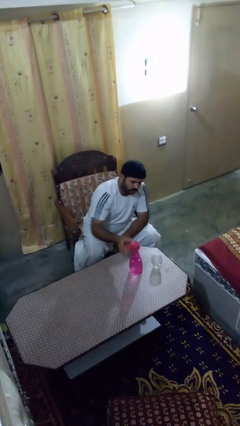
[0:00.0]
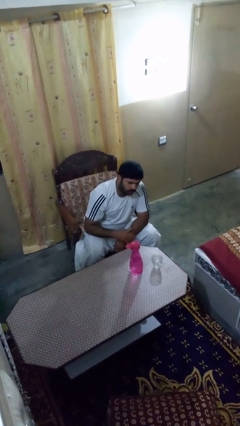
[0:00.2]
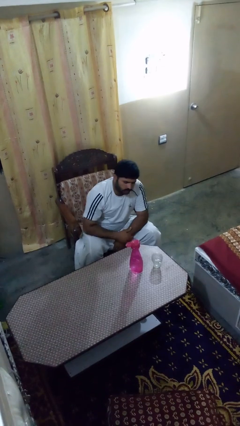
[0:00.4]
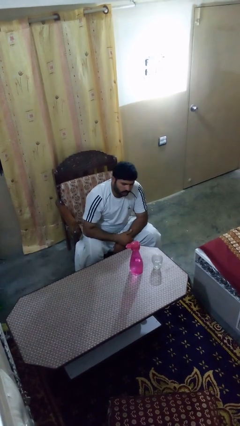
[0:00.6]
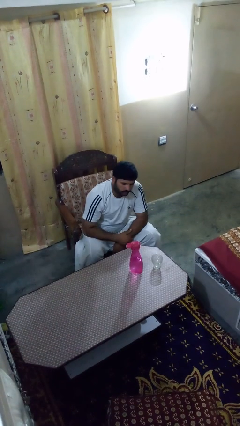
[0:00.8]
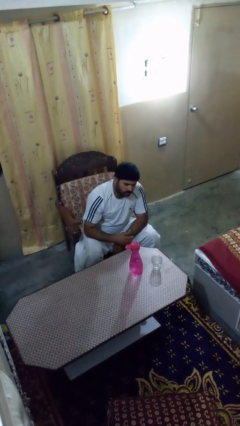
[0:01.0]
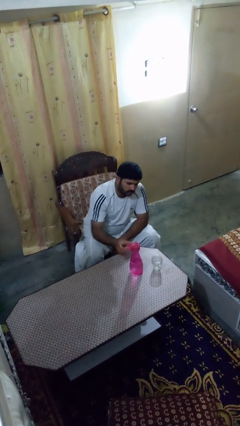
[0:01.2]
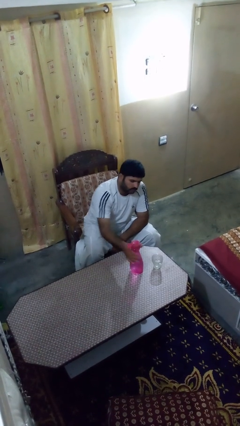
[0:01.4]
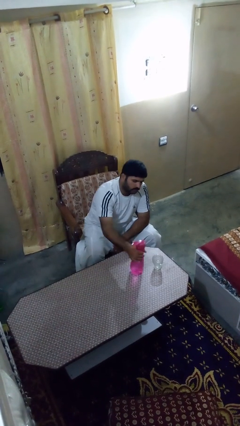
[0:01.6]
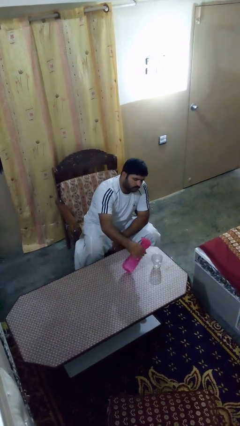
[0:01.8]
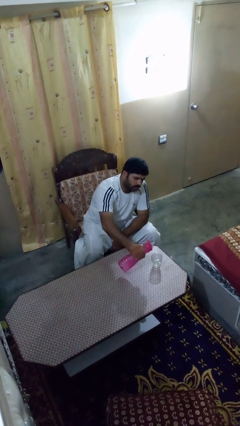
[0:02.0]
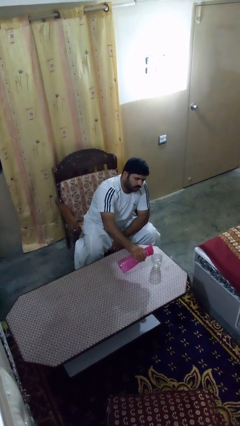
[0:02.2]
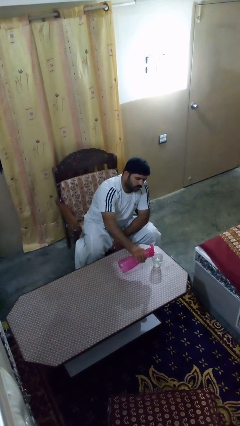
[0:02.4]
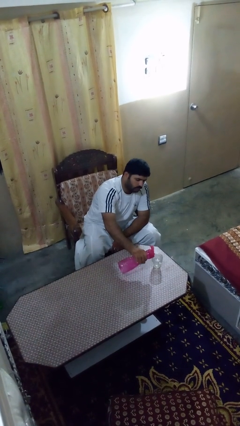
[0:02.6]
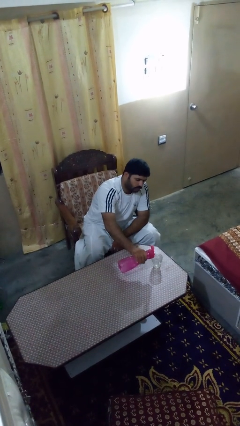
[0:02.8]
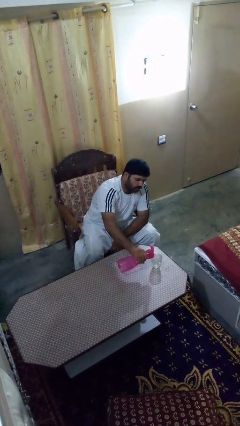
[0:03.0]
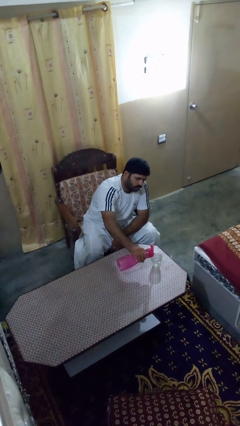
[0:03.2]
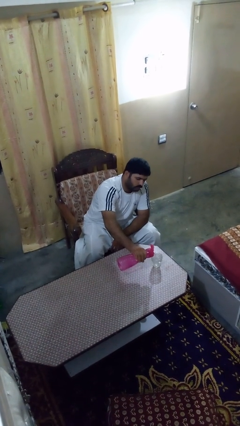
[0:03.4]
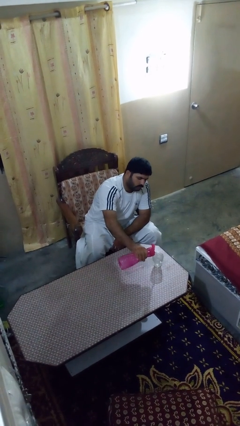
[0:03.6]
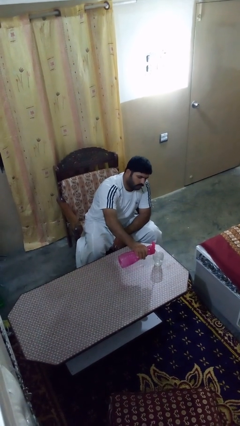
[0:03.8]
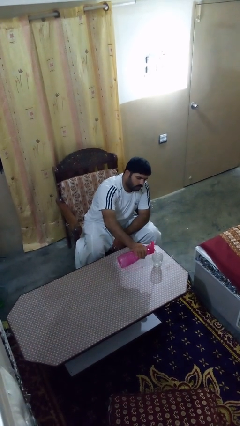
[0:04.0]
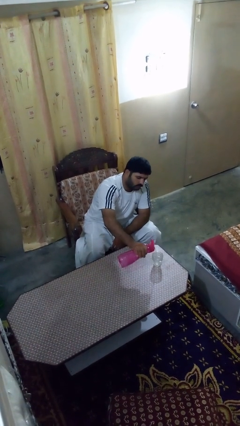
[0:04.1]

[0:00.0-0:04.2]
person pours liquid into cup

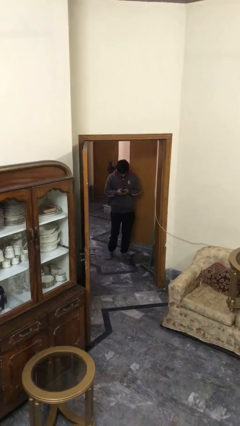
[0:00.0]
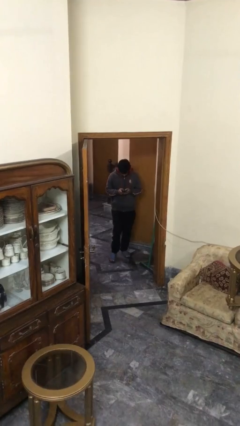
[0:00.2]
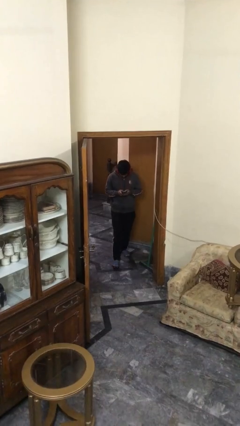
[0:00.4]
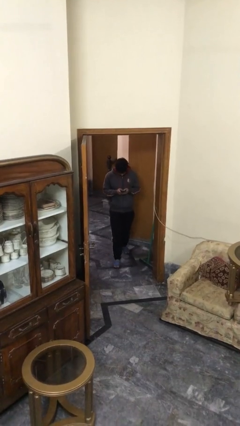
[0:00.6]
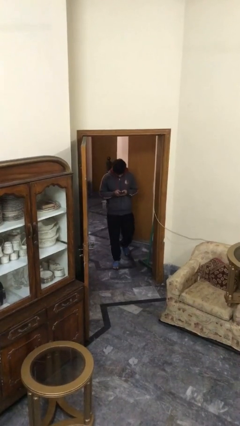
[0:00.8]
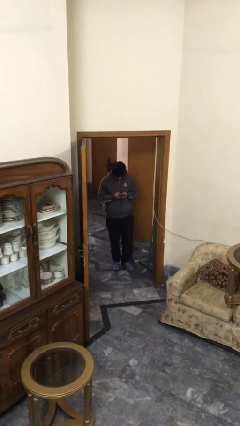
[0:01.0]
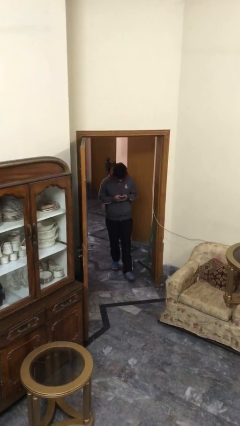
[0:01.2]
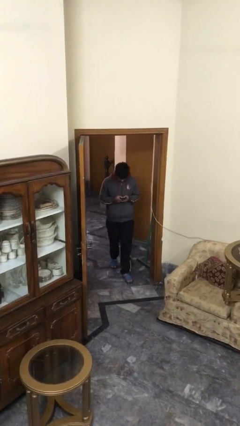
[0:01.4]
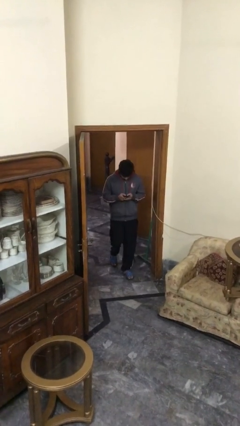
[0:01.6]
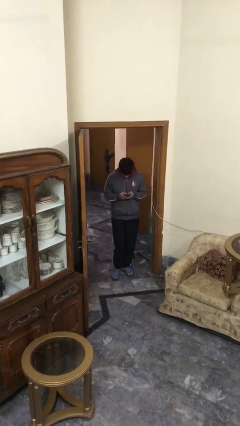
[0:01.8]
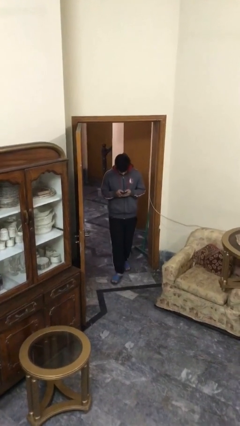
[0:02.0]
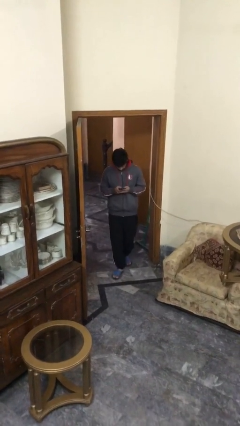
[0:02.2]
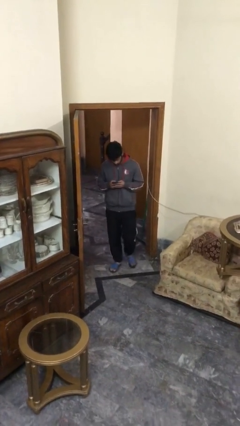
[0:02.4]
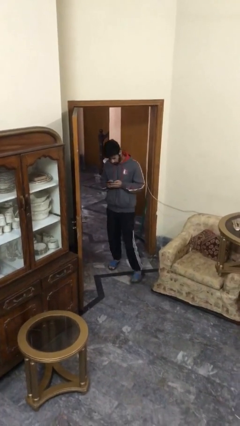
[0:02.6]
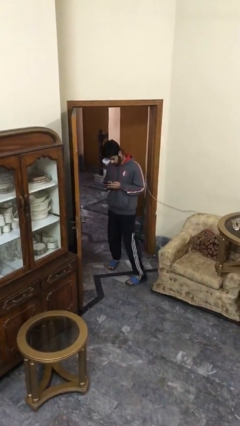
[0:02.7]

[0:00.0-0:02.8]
person enters scene through structure

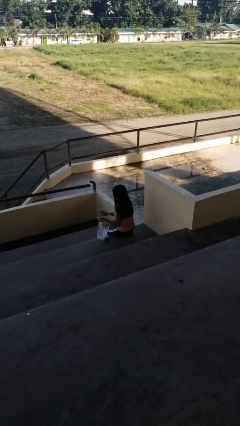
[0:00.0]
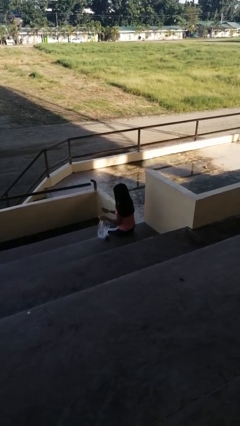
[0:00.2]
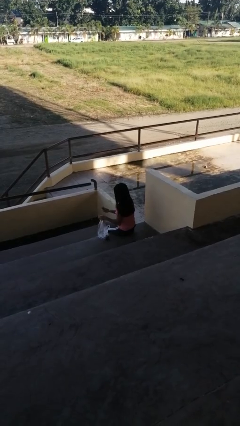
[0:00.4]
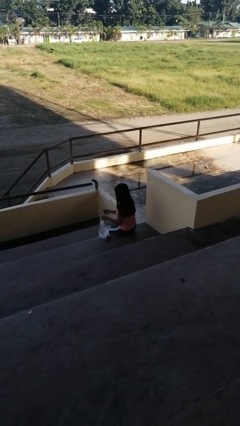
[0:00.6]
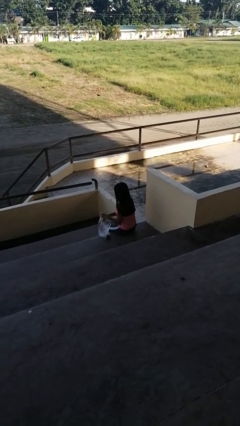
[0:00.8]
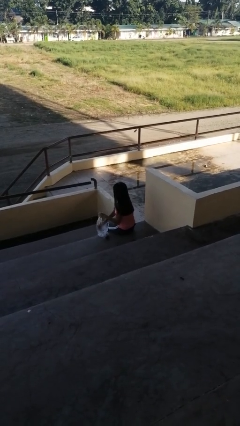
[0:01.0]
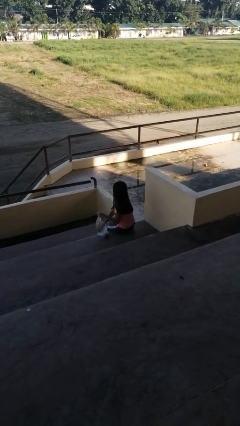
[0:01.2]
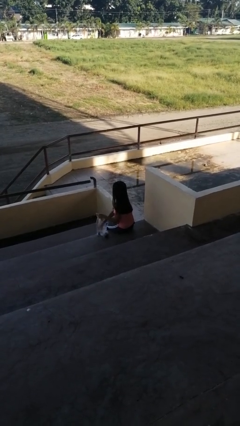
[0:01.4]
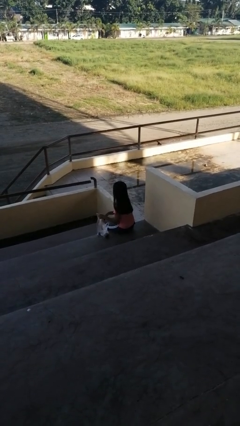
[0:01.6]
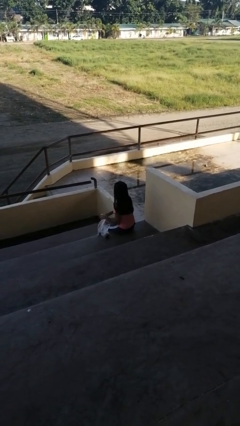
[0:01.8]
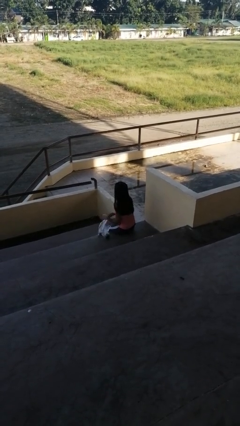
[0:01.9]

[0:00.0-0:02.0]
person puts object into bag

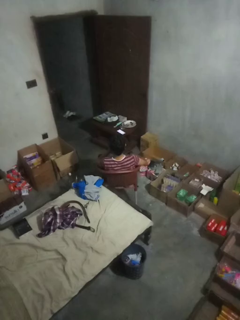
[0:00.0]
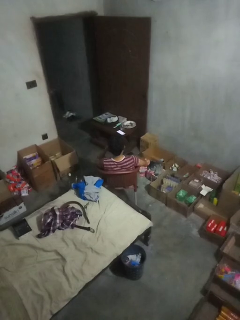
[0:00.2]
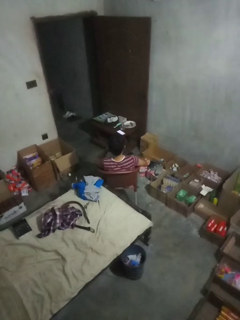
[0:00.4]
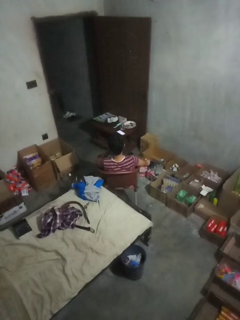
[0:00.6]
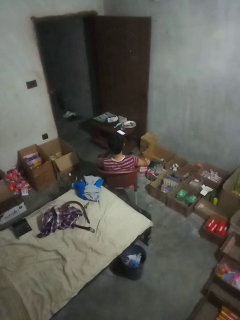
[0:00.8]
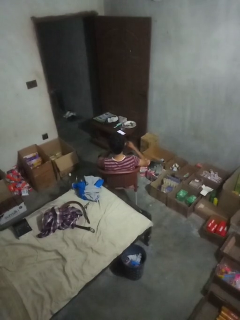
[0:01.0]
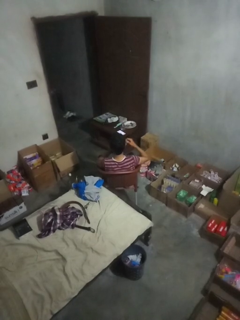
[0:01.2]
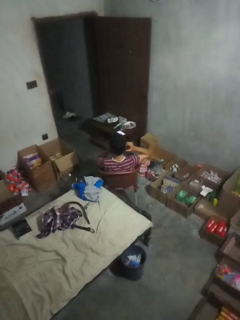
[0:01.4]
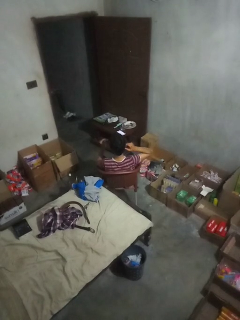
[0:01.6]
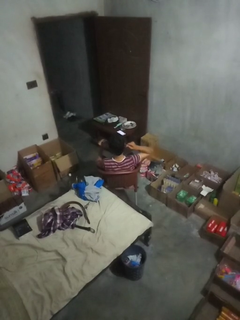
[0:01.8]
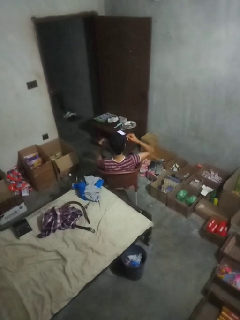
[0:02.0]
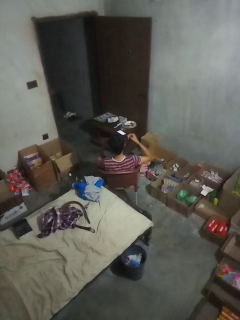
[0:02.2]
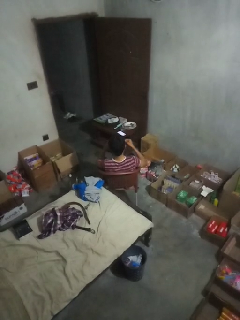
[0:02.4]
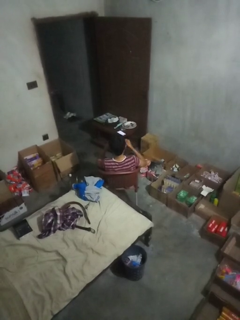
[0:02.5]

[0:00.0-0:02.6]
person takes off earrings

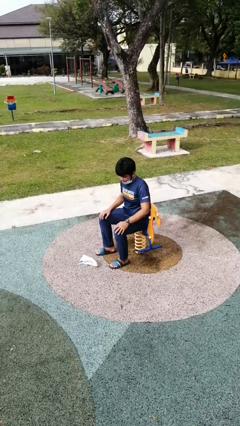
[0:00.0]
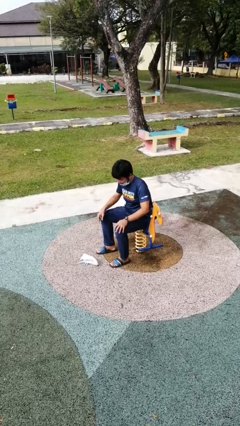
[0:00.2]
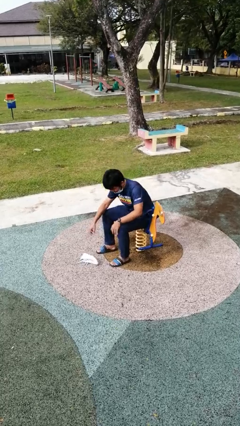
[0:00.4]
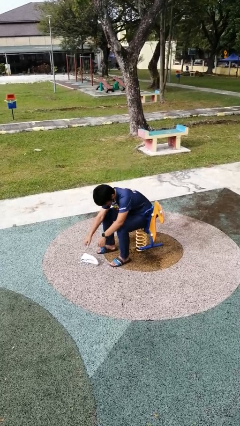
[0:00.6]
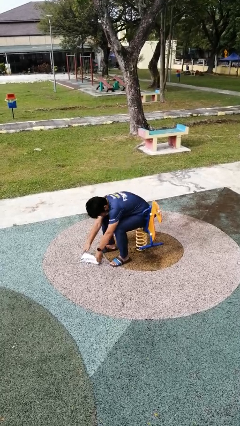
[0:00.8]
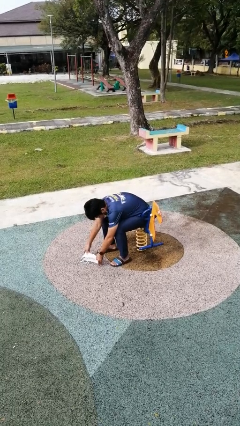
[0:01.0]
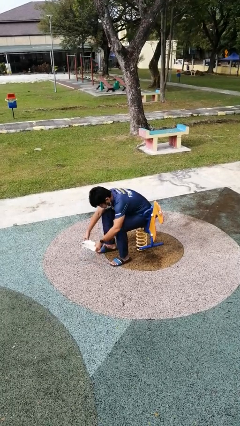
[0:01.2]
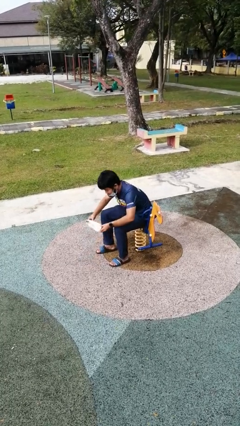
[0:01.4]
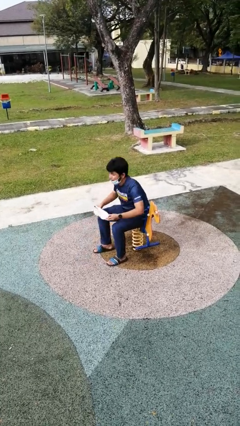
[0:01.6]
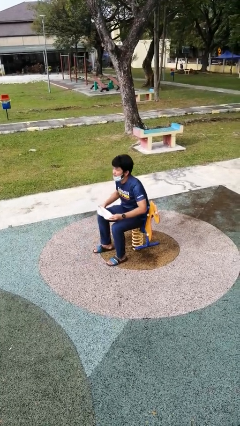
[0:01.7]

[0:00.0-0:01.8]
person picks up object from floor

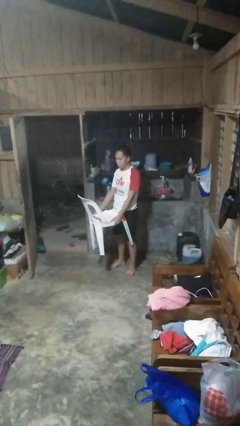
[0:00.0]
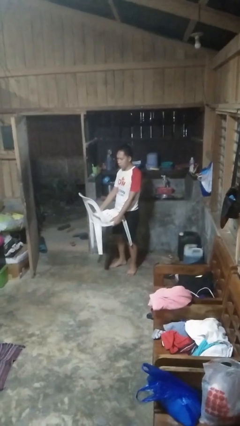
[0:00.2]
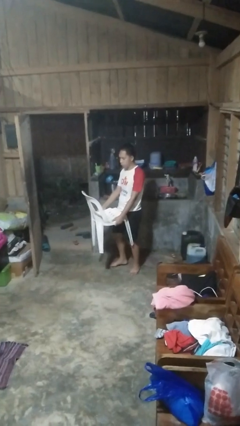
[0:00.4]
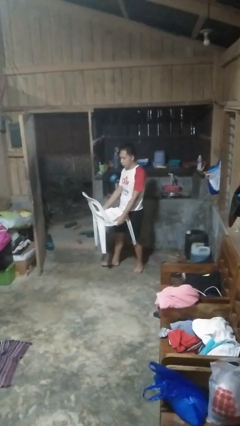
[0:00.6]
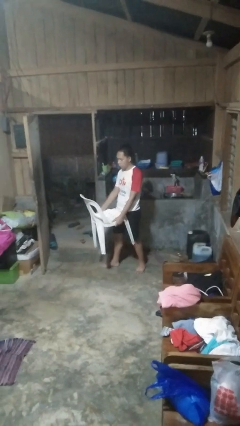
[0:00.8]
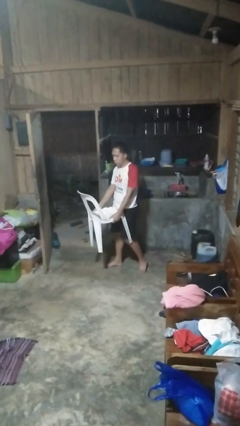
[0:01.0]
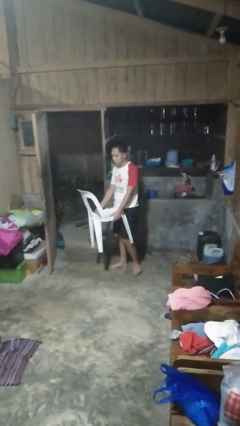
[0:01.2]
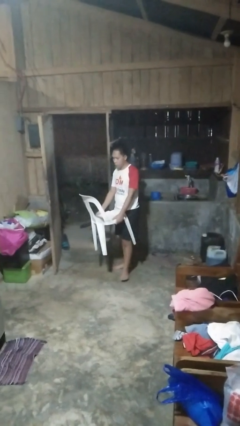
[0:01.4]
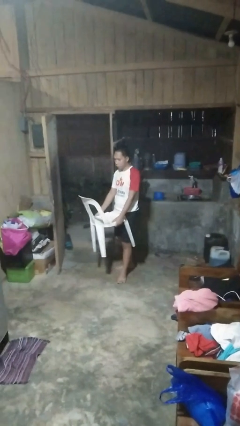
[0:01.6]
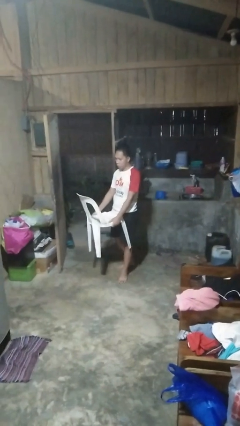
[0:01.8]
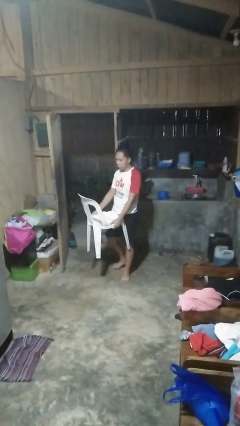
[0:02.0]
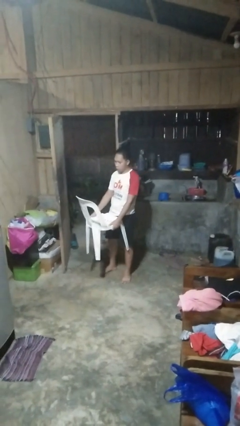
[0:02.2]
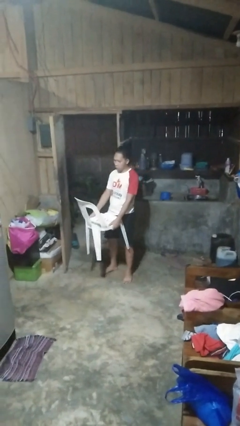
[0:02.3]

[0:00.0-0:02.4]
person carries furniture

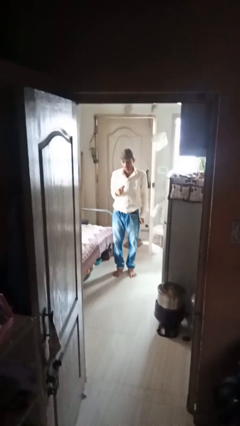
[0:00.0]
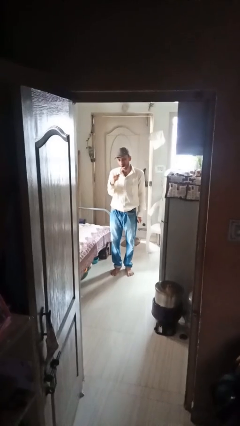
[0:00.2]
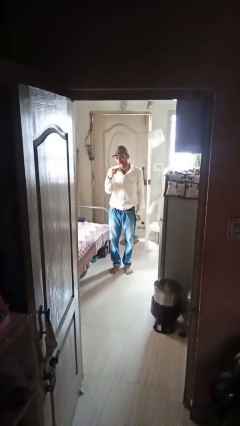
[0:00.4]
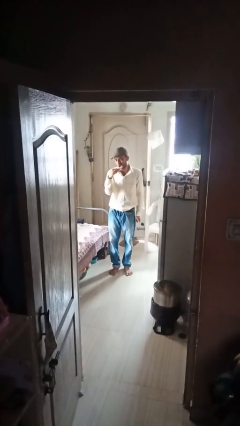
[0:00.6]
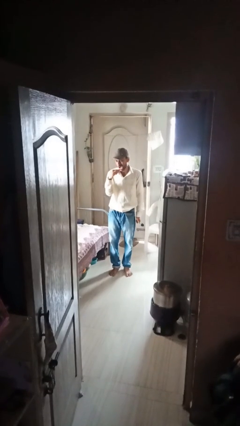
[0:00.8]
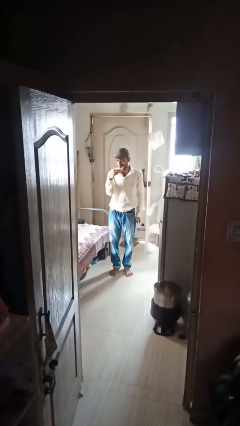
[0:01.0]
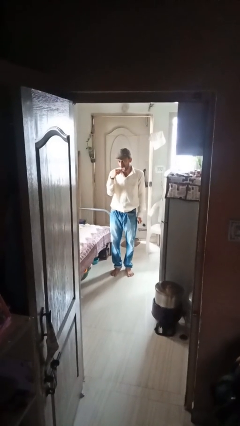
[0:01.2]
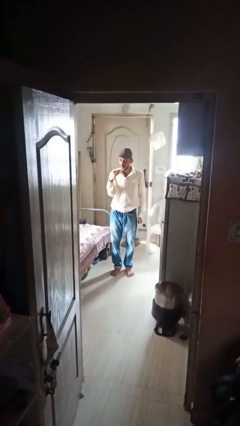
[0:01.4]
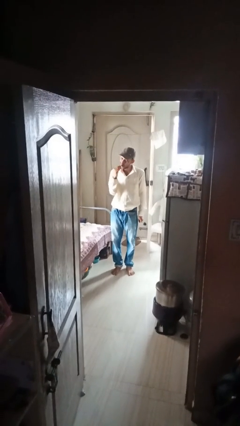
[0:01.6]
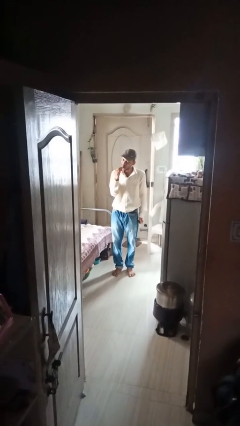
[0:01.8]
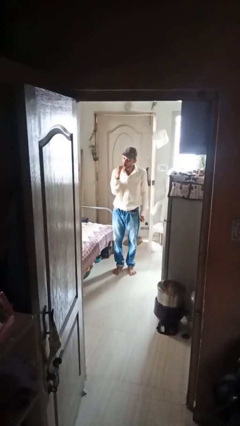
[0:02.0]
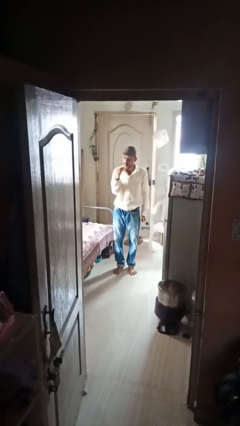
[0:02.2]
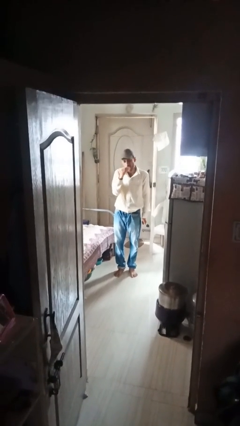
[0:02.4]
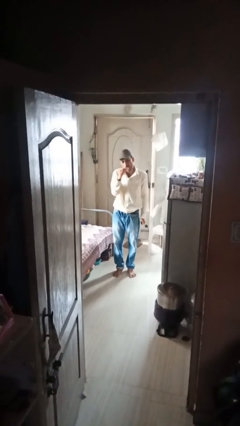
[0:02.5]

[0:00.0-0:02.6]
person brushes teeth
